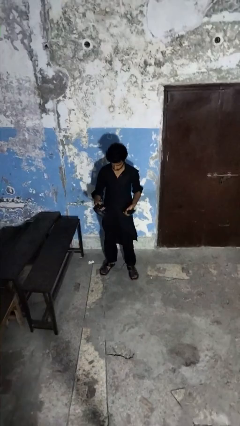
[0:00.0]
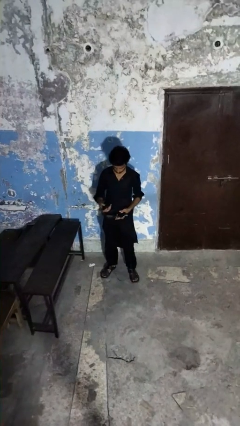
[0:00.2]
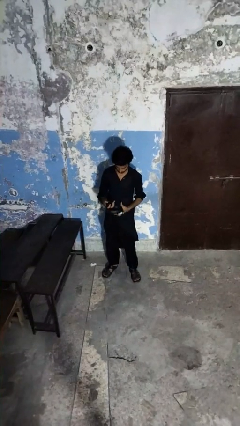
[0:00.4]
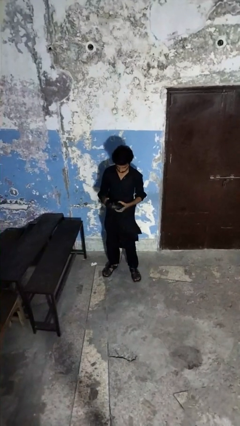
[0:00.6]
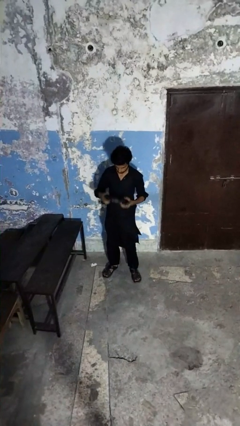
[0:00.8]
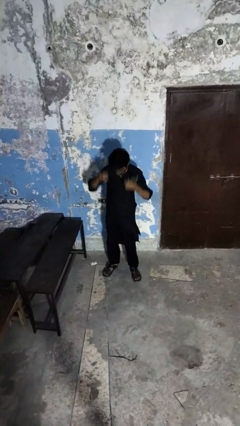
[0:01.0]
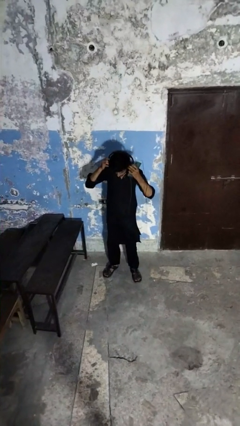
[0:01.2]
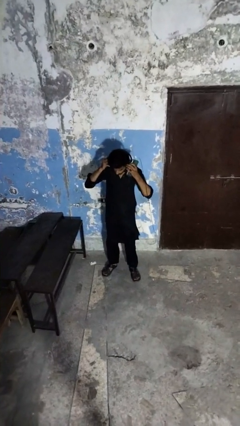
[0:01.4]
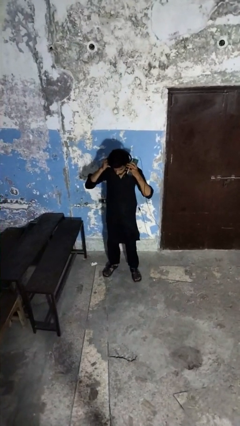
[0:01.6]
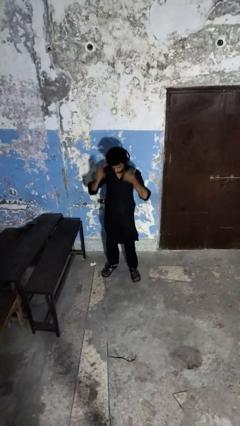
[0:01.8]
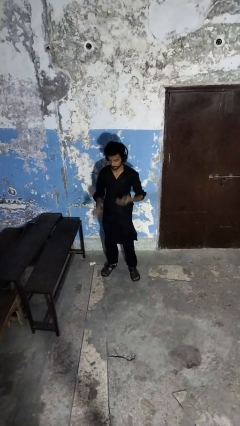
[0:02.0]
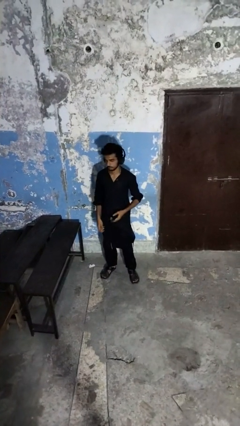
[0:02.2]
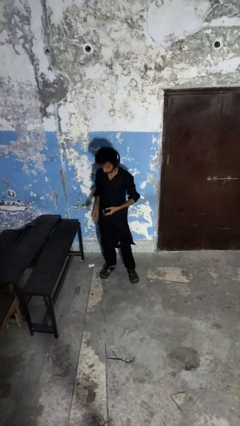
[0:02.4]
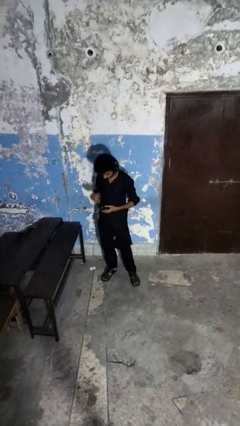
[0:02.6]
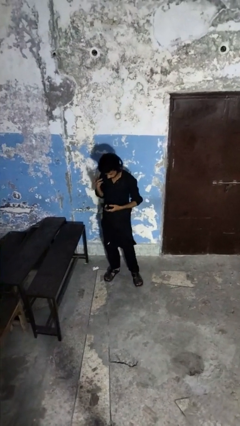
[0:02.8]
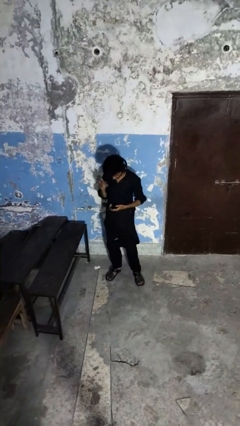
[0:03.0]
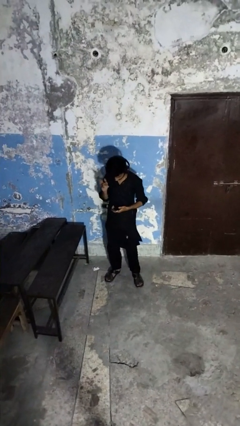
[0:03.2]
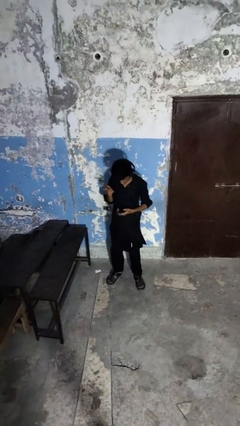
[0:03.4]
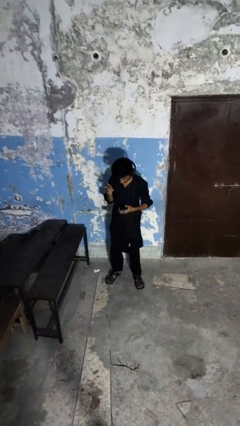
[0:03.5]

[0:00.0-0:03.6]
person puts on headphones

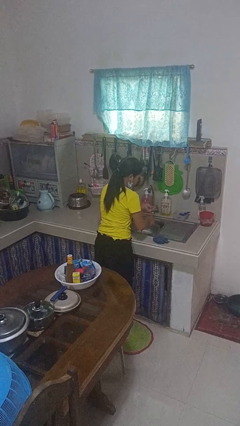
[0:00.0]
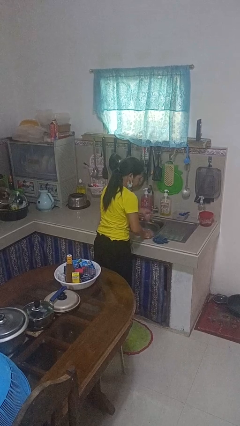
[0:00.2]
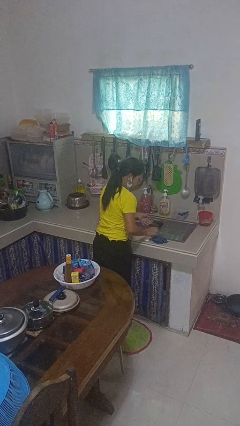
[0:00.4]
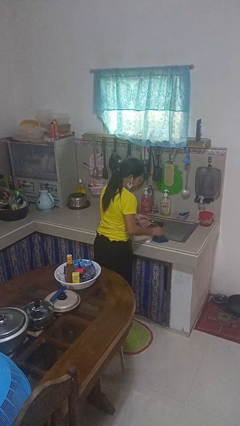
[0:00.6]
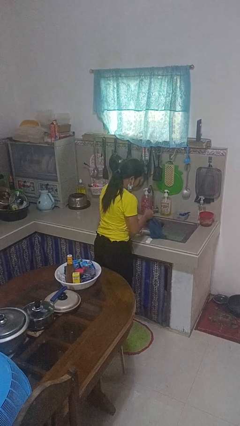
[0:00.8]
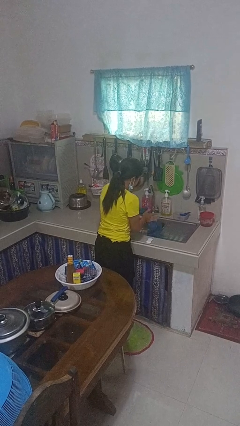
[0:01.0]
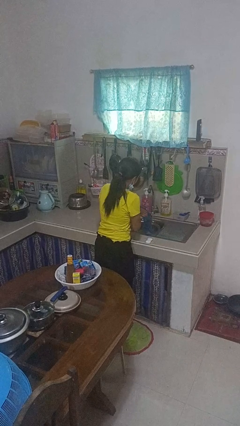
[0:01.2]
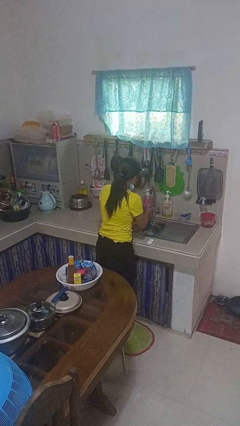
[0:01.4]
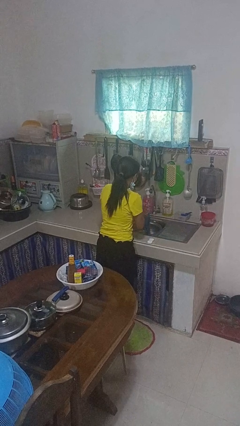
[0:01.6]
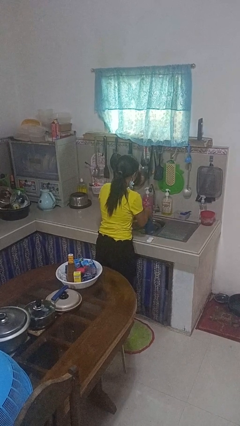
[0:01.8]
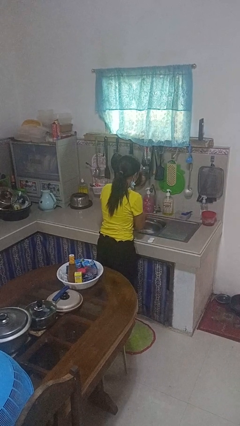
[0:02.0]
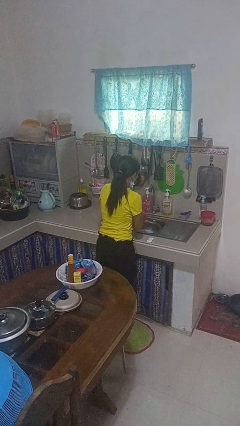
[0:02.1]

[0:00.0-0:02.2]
person dries hands with towel

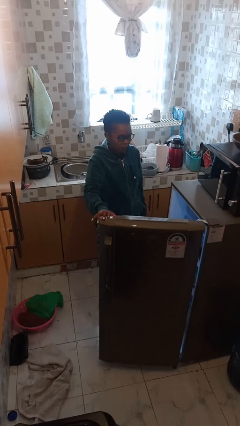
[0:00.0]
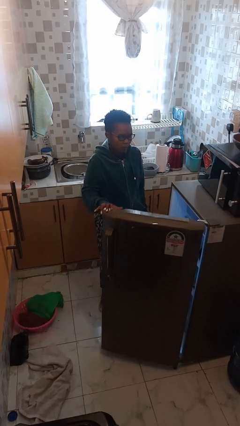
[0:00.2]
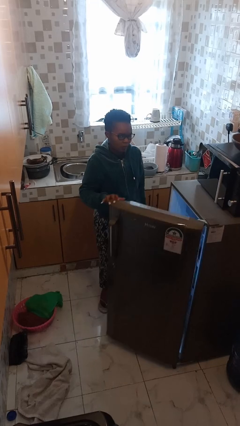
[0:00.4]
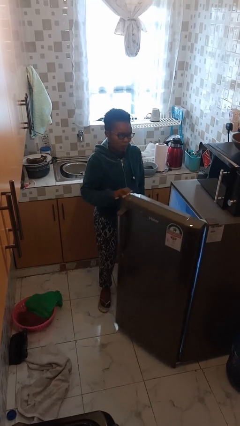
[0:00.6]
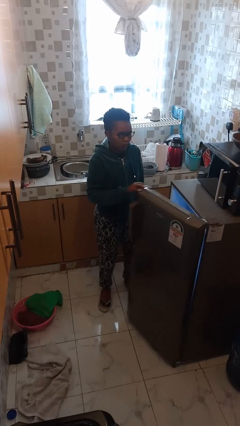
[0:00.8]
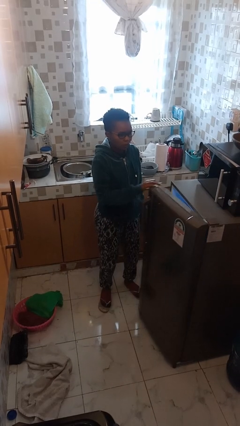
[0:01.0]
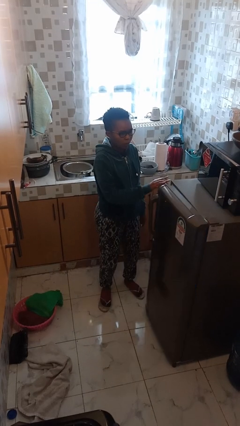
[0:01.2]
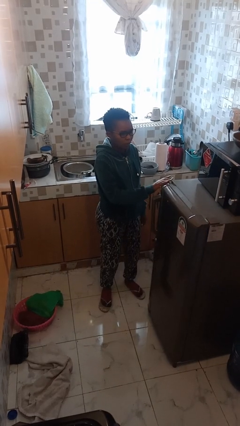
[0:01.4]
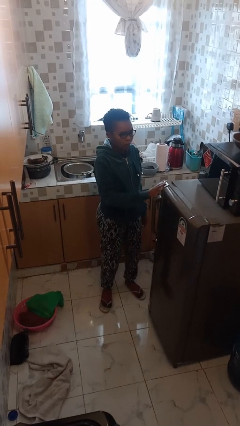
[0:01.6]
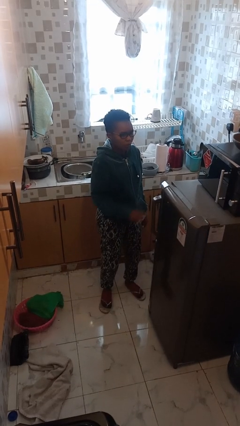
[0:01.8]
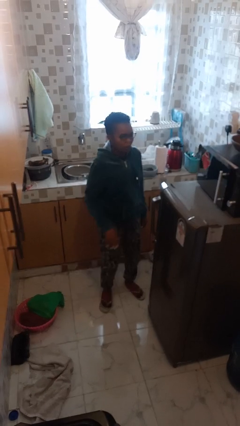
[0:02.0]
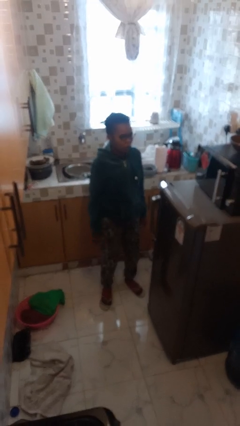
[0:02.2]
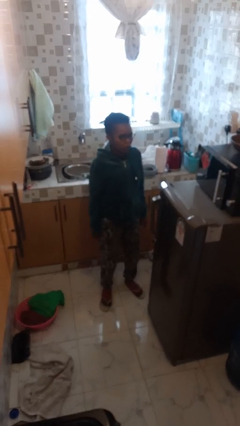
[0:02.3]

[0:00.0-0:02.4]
person closes refrigerator

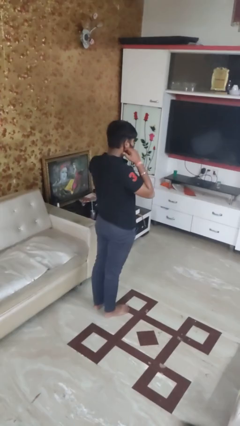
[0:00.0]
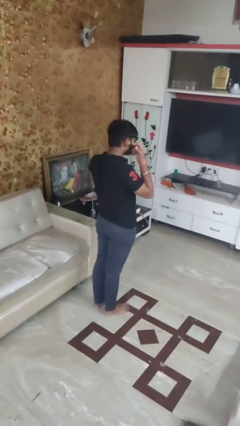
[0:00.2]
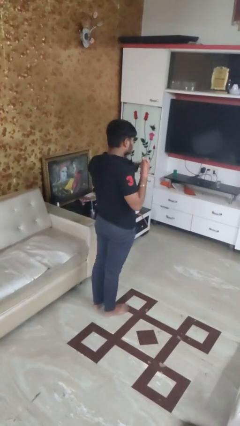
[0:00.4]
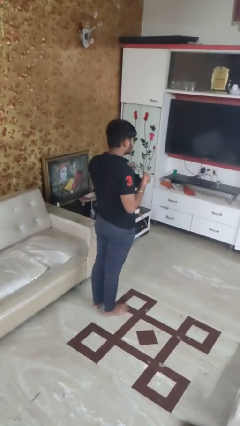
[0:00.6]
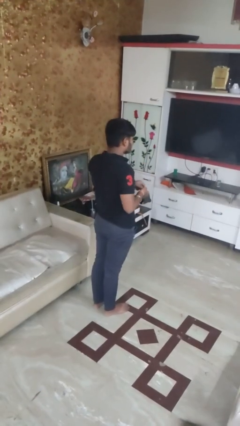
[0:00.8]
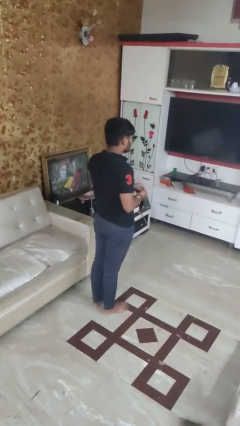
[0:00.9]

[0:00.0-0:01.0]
person takes off facemask

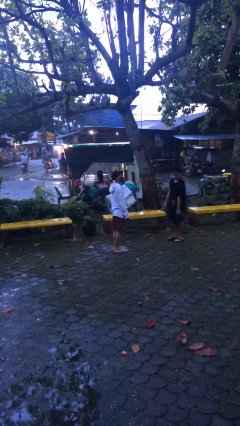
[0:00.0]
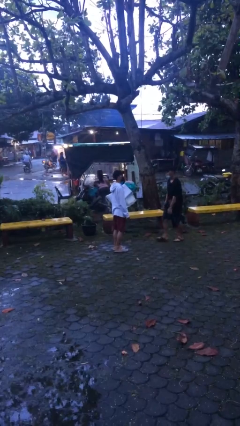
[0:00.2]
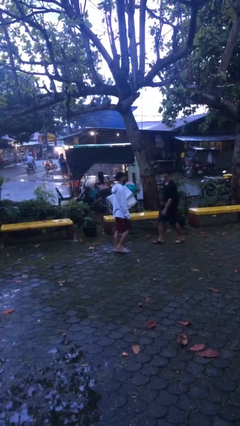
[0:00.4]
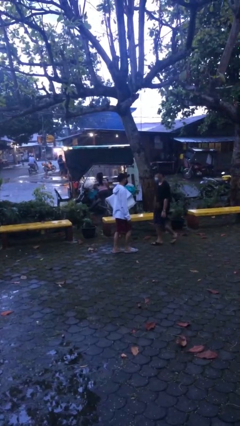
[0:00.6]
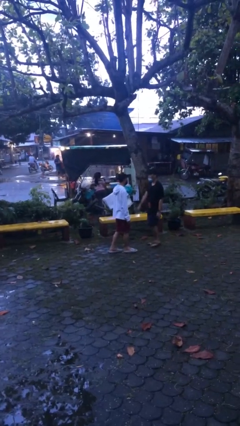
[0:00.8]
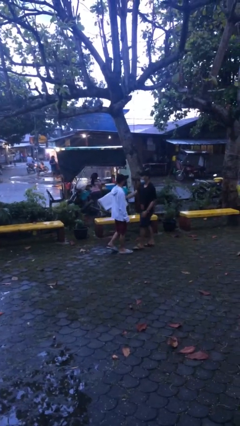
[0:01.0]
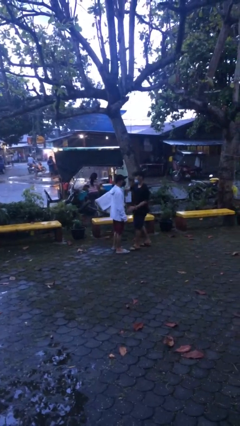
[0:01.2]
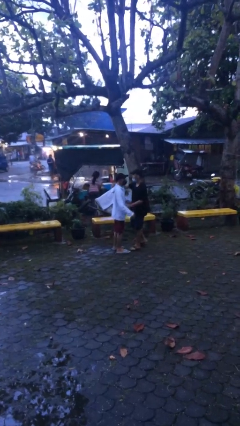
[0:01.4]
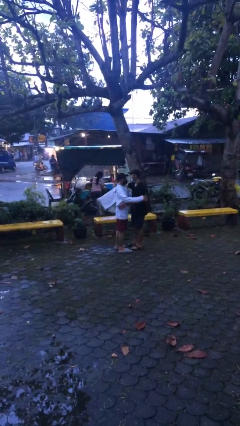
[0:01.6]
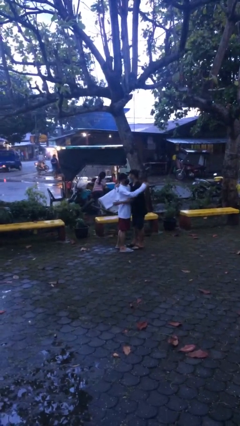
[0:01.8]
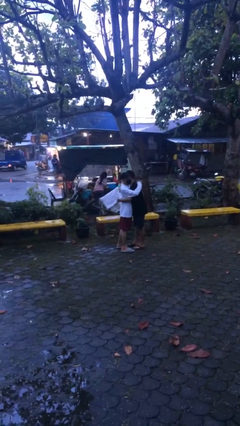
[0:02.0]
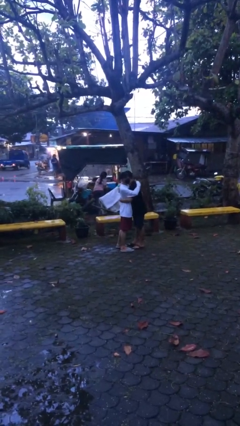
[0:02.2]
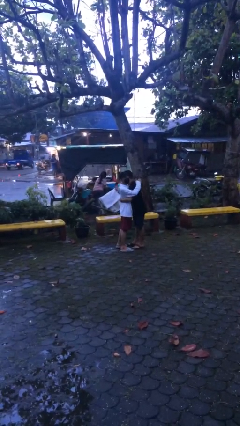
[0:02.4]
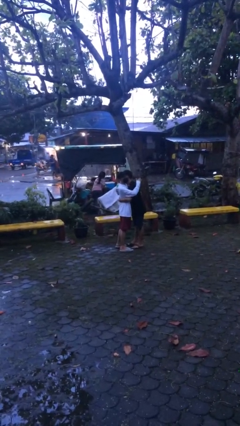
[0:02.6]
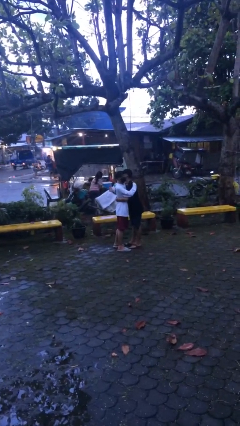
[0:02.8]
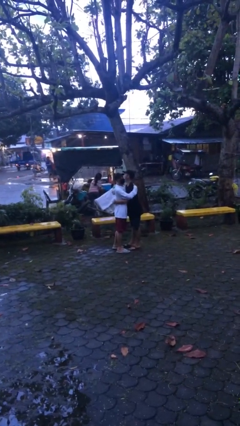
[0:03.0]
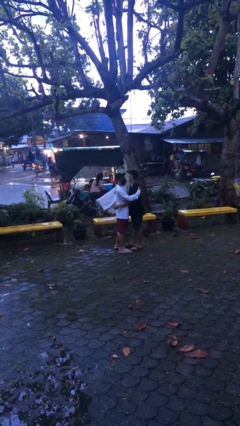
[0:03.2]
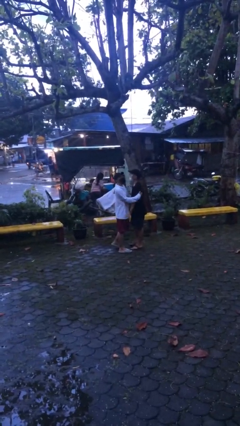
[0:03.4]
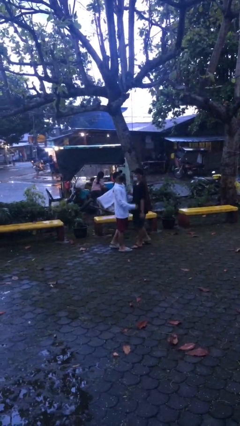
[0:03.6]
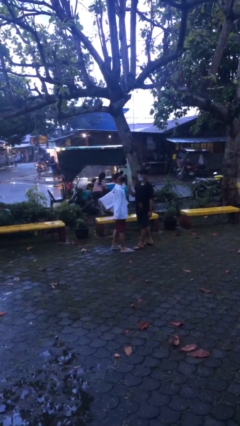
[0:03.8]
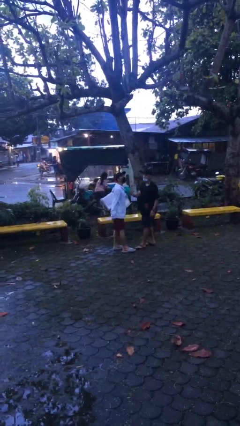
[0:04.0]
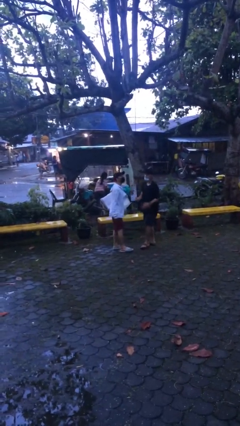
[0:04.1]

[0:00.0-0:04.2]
person embraces person

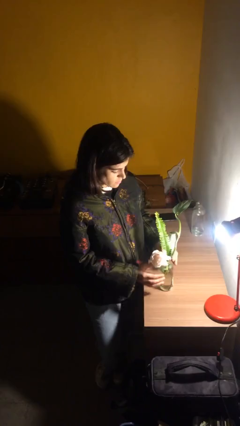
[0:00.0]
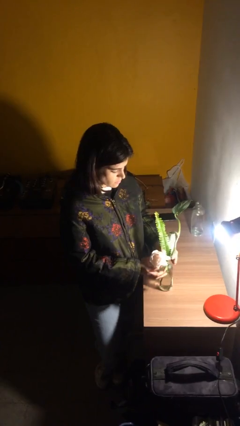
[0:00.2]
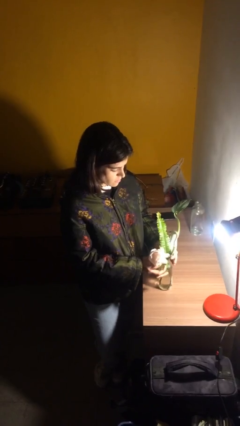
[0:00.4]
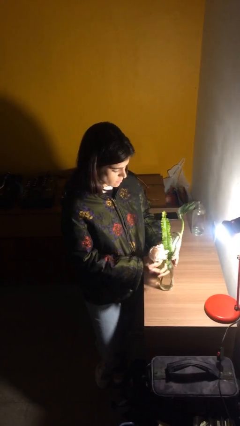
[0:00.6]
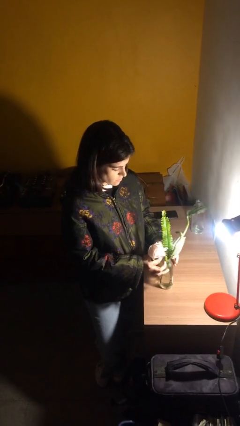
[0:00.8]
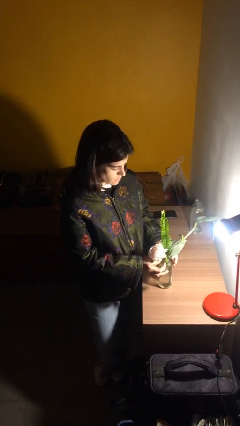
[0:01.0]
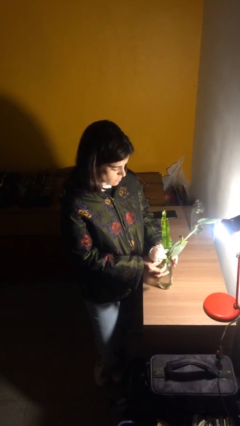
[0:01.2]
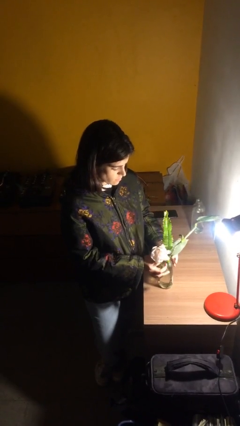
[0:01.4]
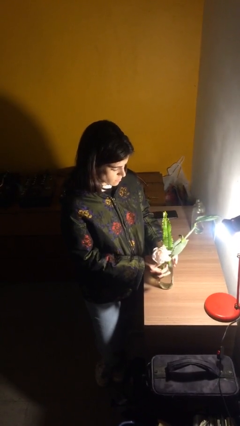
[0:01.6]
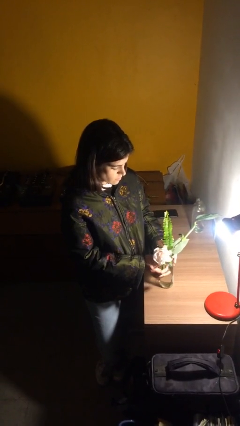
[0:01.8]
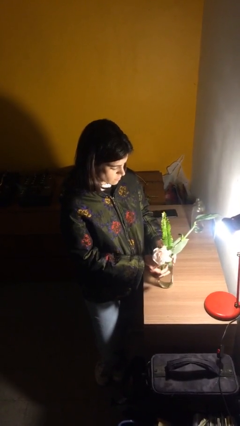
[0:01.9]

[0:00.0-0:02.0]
person arranges flowers in vase

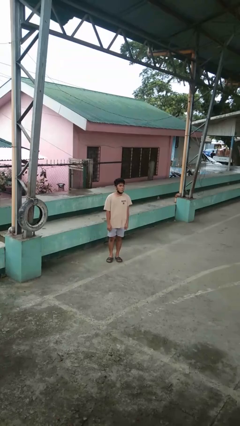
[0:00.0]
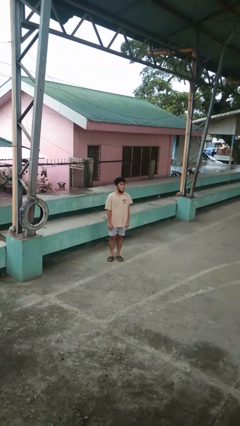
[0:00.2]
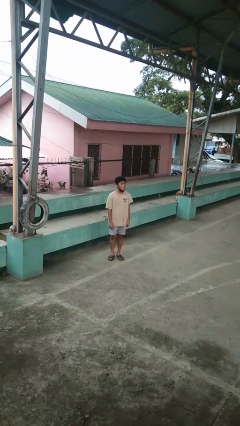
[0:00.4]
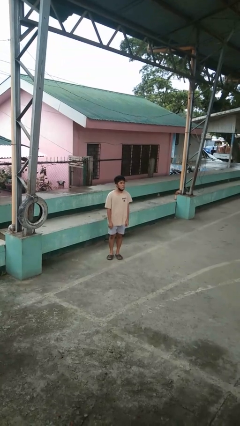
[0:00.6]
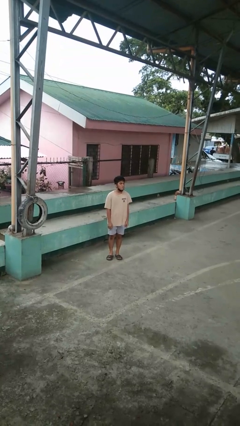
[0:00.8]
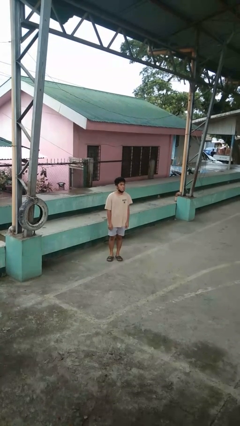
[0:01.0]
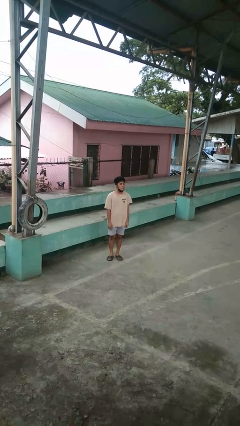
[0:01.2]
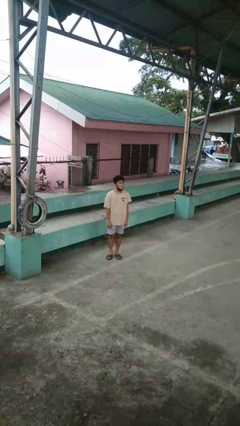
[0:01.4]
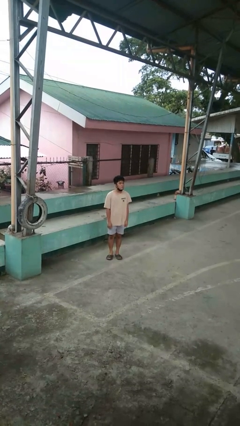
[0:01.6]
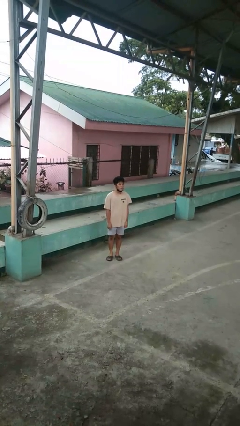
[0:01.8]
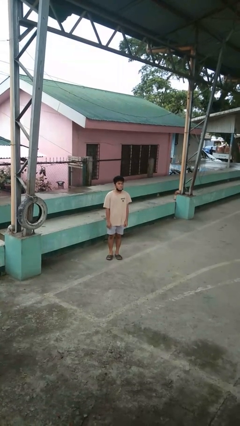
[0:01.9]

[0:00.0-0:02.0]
person sticks out tongue
